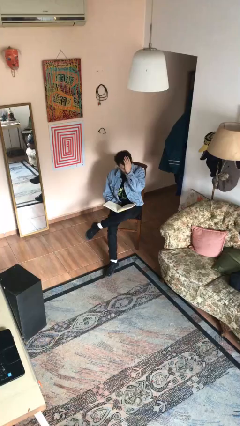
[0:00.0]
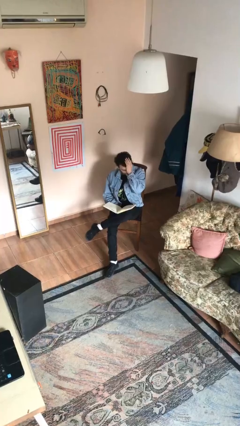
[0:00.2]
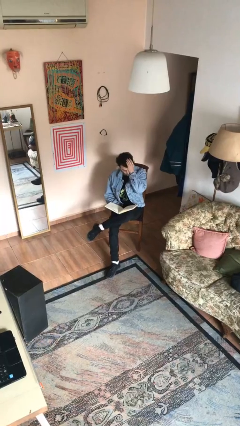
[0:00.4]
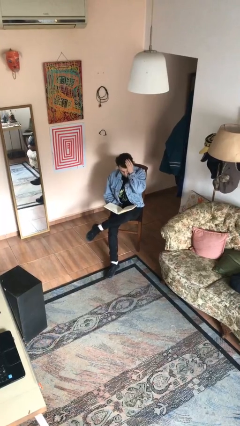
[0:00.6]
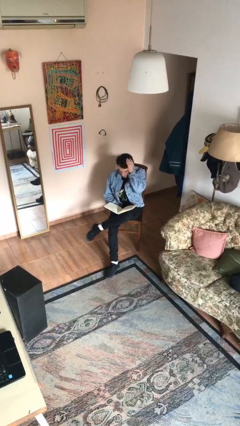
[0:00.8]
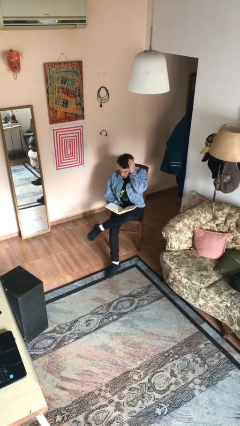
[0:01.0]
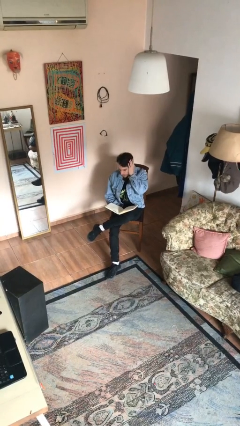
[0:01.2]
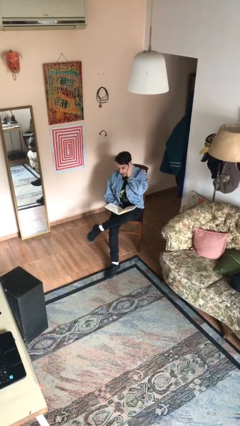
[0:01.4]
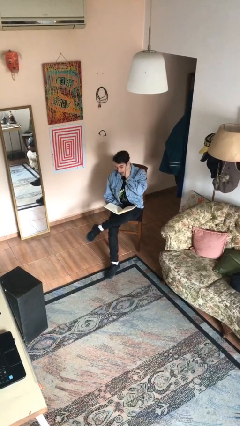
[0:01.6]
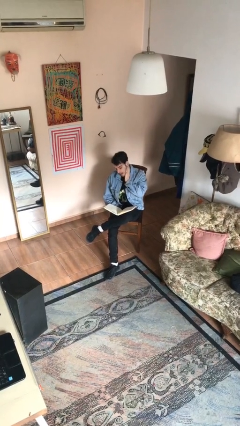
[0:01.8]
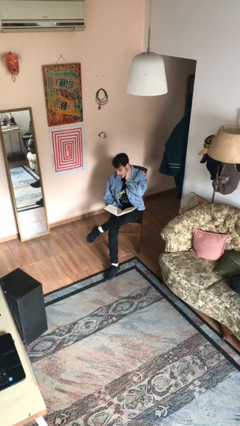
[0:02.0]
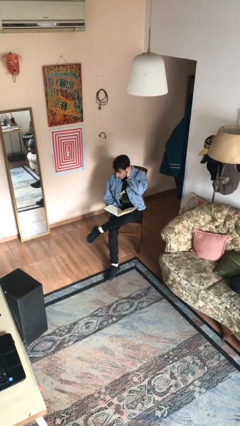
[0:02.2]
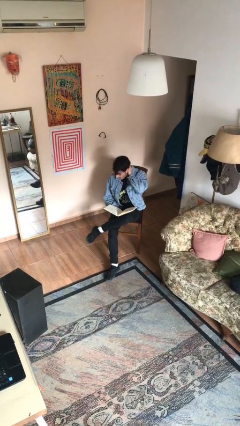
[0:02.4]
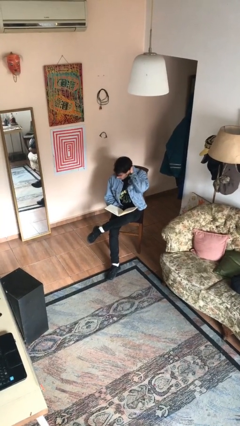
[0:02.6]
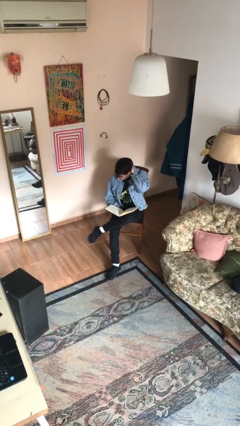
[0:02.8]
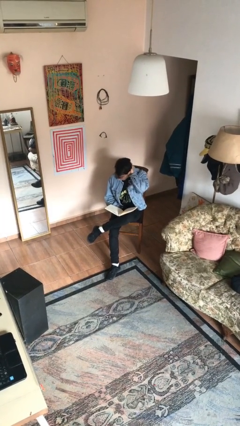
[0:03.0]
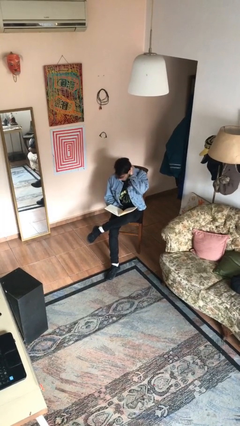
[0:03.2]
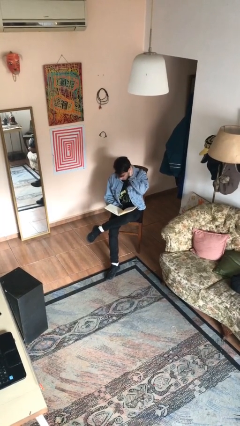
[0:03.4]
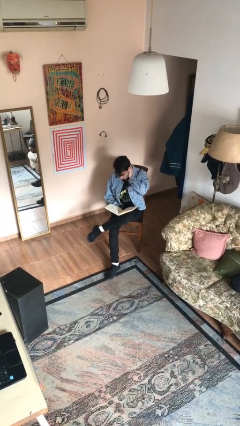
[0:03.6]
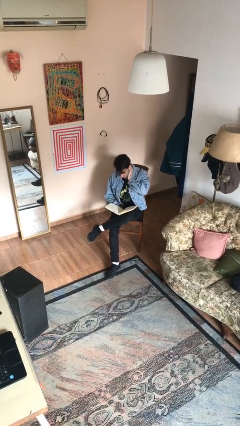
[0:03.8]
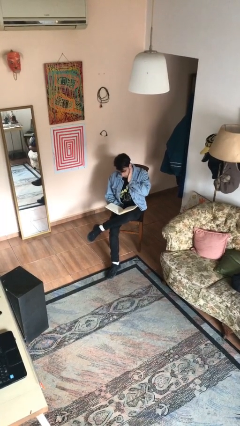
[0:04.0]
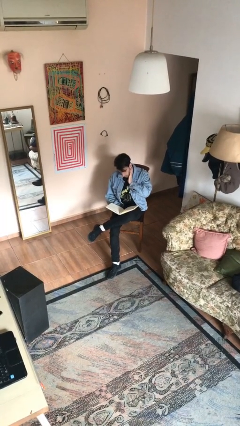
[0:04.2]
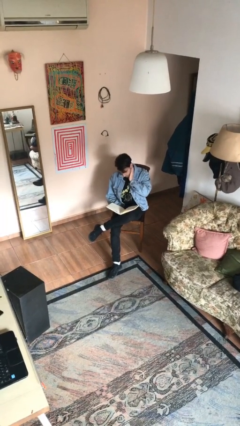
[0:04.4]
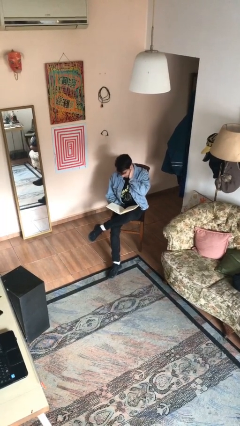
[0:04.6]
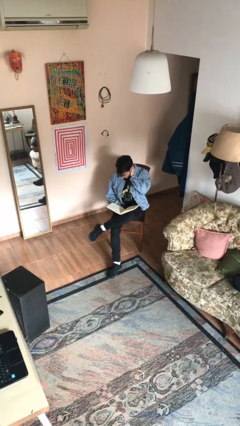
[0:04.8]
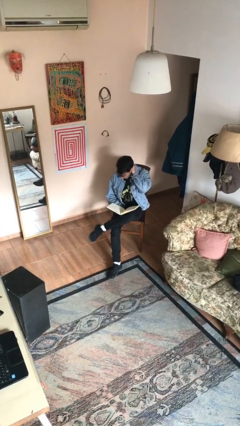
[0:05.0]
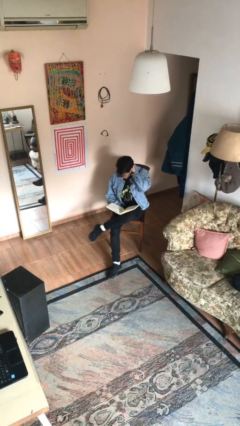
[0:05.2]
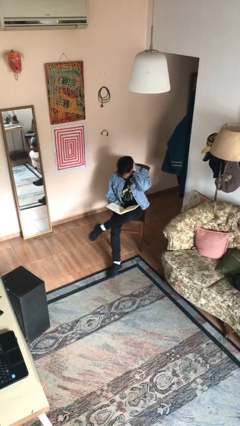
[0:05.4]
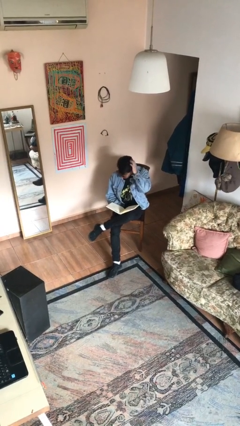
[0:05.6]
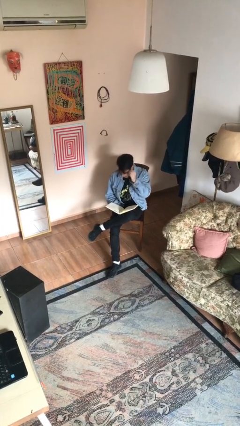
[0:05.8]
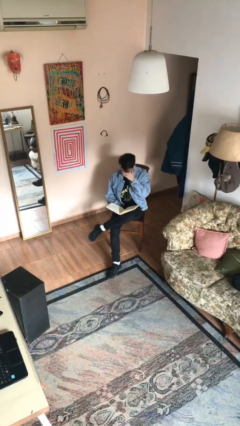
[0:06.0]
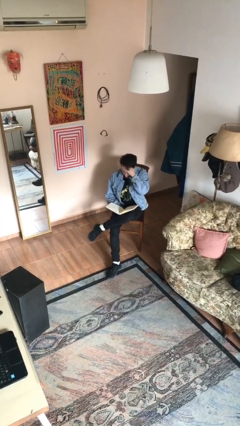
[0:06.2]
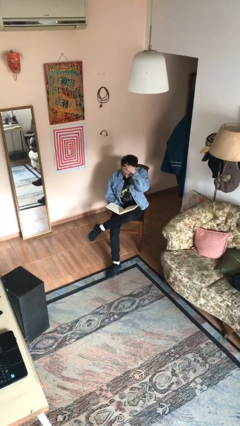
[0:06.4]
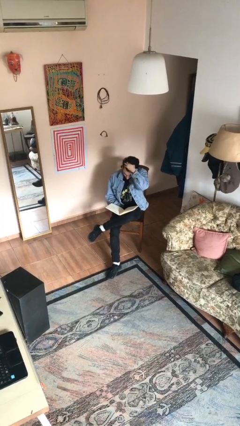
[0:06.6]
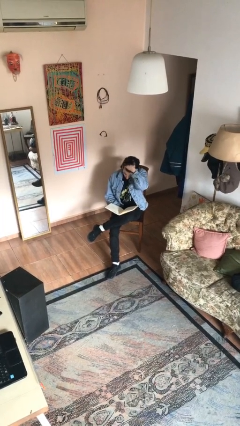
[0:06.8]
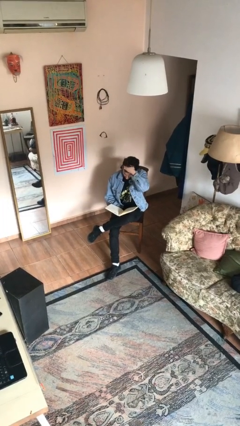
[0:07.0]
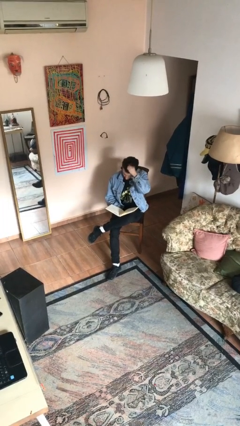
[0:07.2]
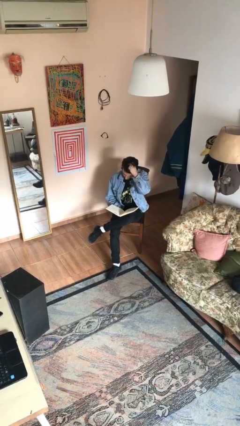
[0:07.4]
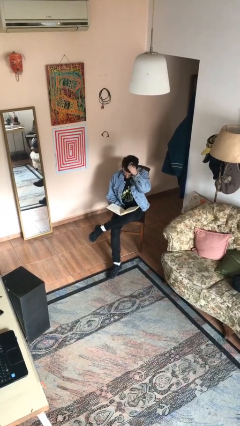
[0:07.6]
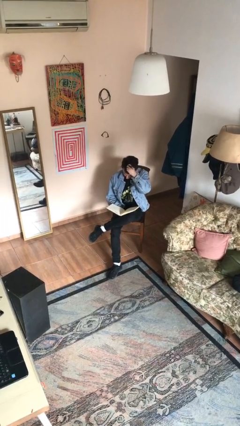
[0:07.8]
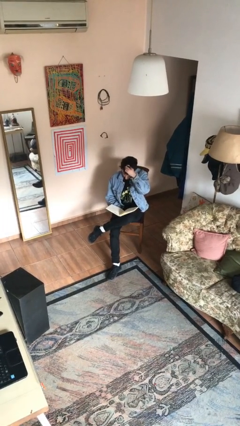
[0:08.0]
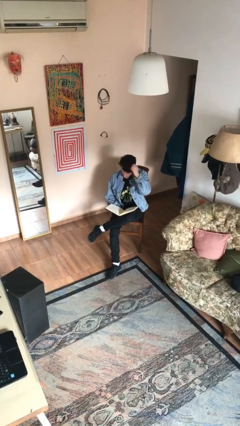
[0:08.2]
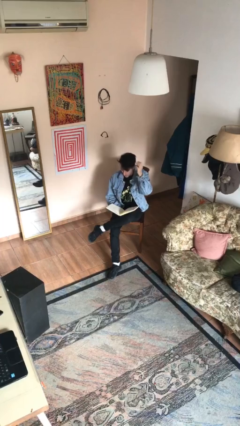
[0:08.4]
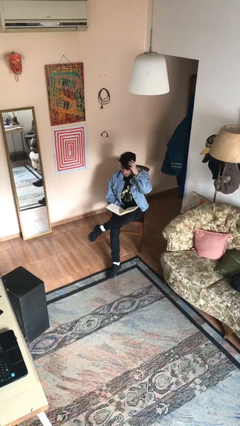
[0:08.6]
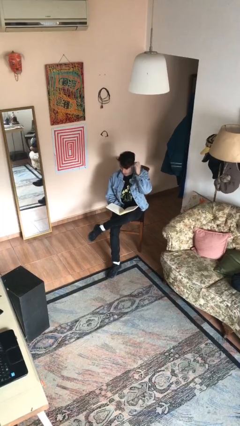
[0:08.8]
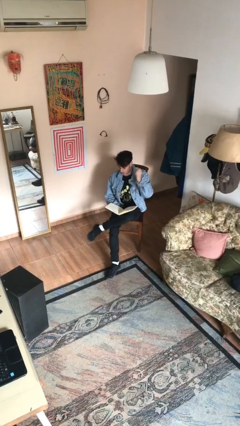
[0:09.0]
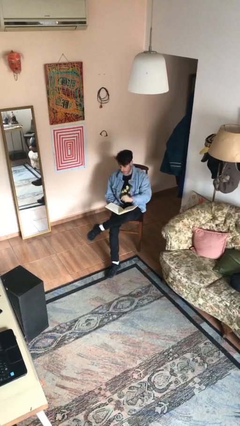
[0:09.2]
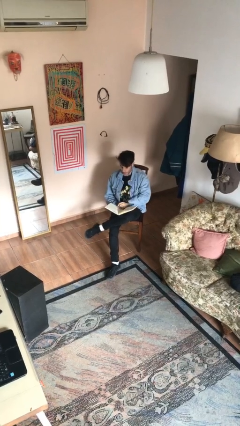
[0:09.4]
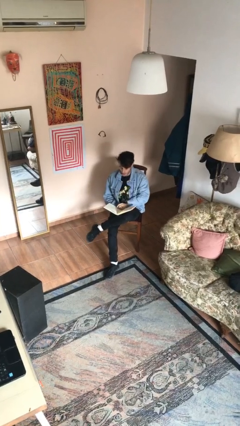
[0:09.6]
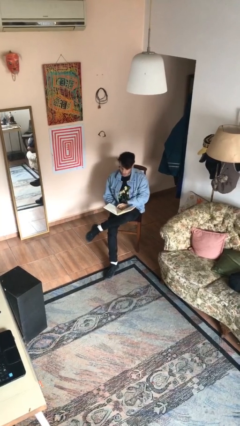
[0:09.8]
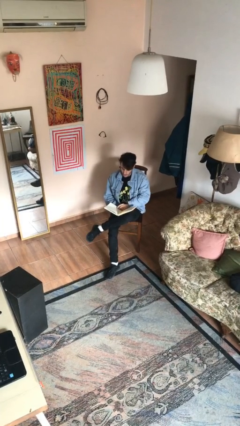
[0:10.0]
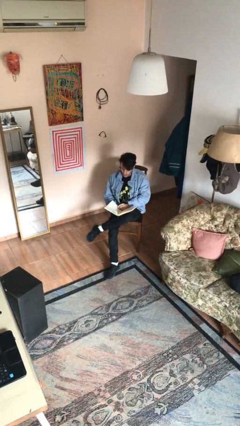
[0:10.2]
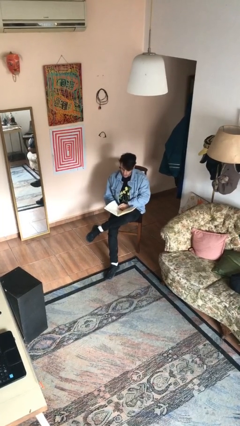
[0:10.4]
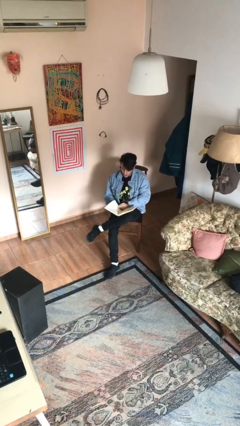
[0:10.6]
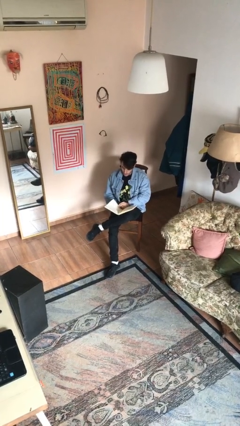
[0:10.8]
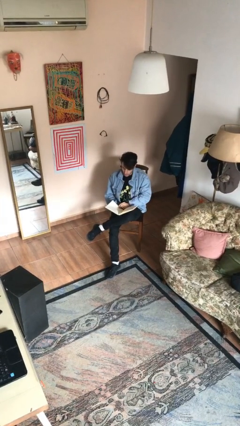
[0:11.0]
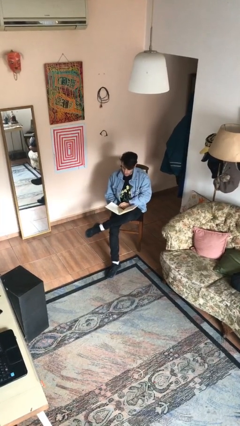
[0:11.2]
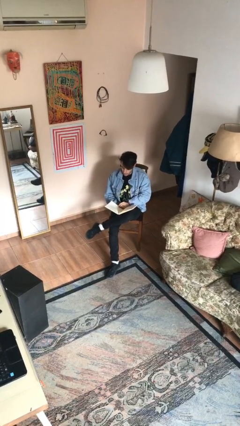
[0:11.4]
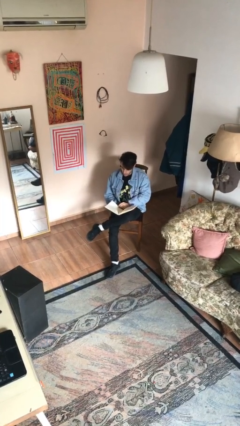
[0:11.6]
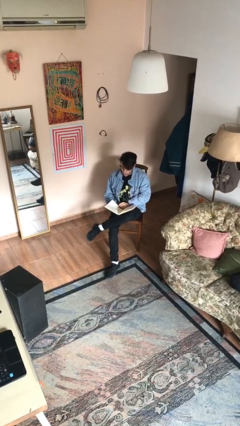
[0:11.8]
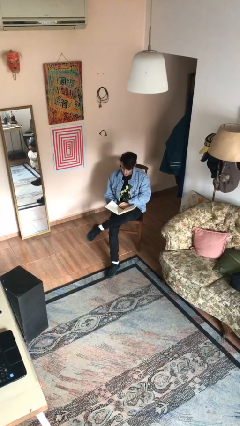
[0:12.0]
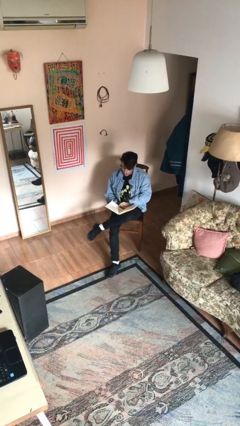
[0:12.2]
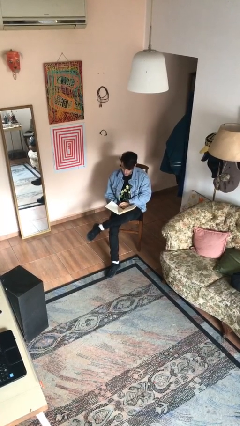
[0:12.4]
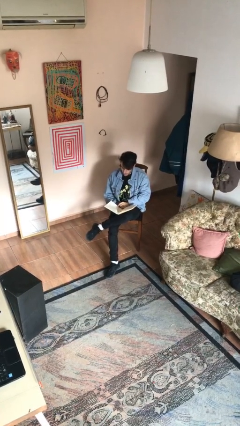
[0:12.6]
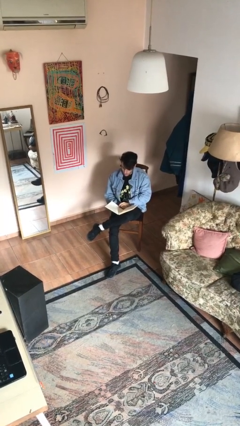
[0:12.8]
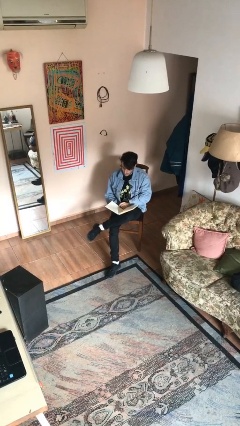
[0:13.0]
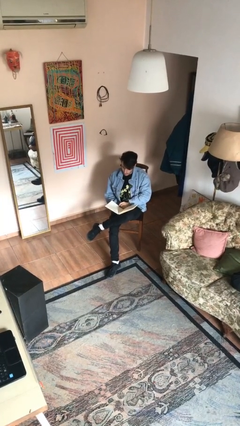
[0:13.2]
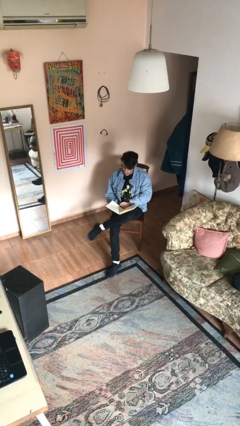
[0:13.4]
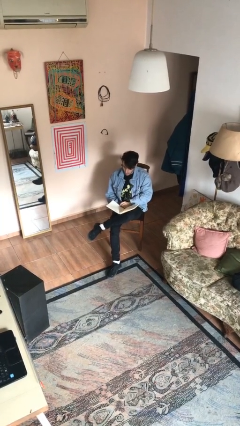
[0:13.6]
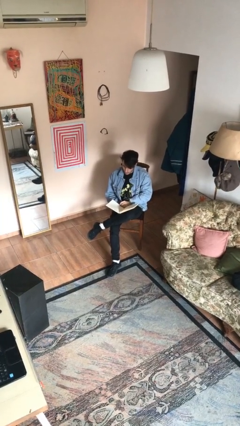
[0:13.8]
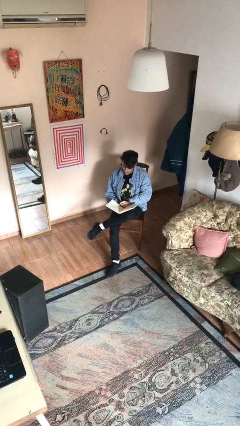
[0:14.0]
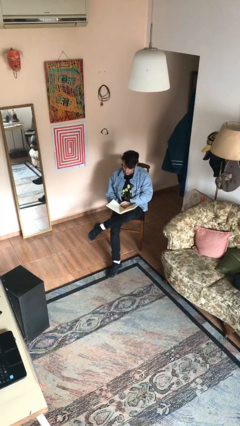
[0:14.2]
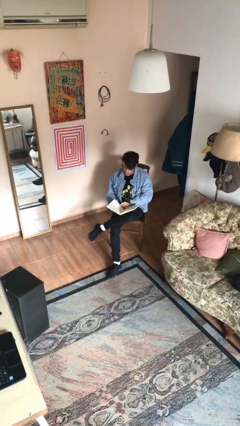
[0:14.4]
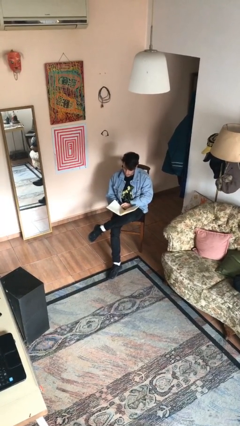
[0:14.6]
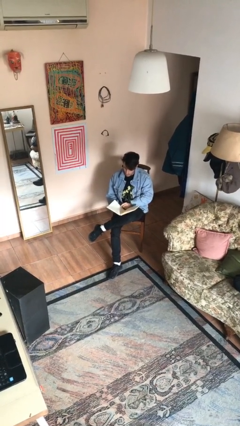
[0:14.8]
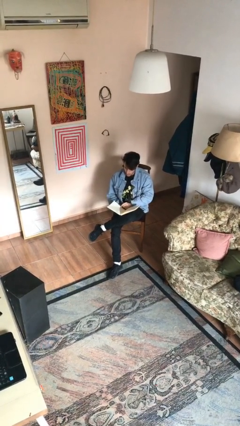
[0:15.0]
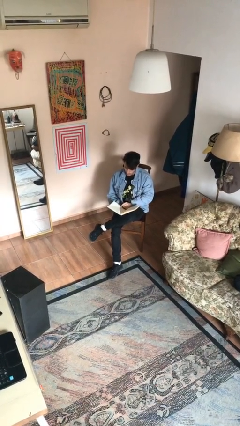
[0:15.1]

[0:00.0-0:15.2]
person reads document

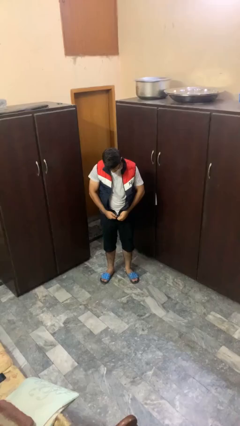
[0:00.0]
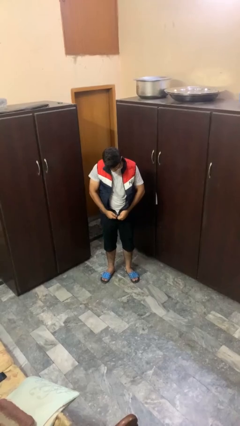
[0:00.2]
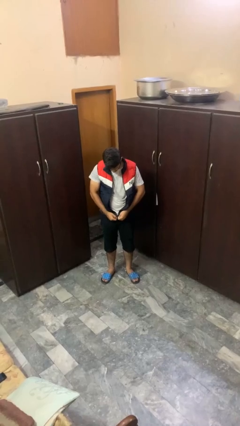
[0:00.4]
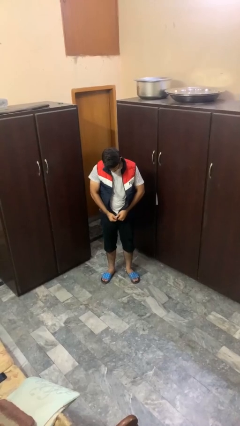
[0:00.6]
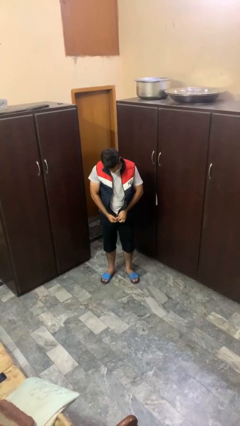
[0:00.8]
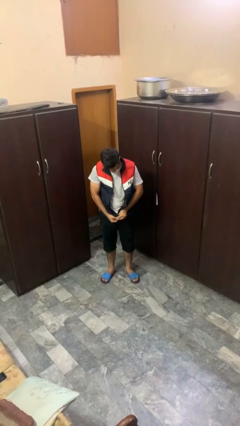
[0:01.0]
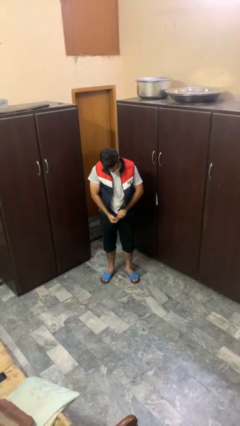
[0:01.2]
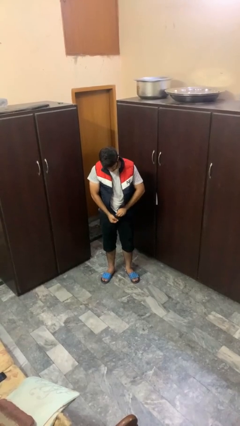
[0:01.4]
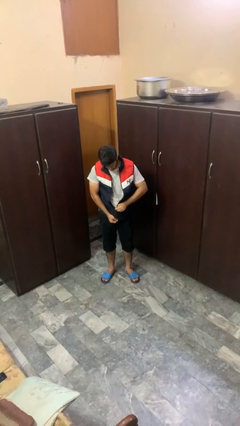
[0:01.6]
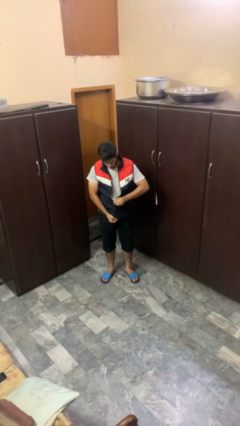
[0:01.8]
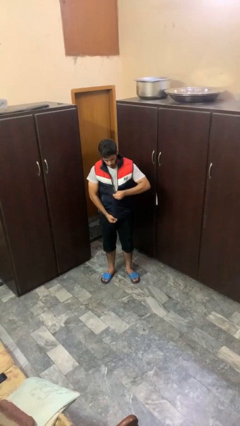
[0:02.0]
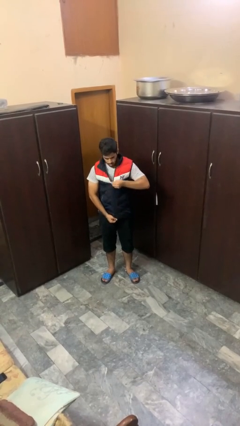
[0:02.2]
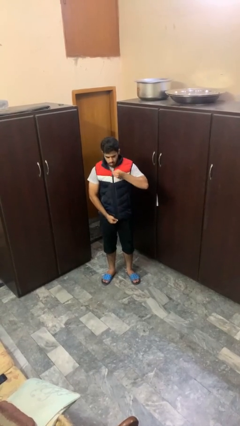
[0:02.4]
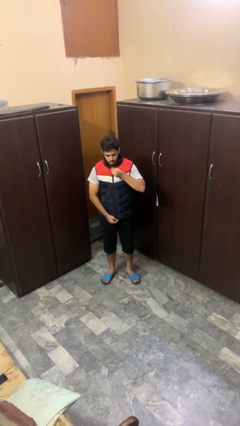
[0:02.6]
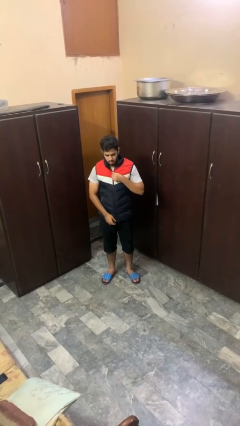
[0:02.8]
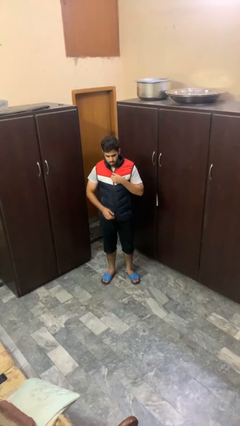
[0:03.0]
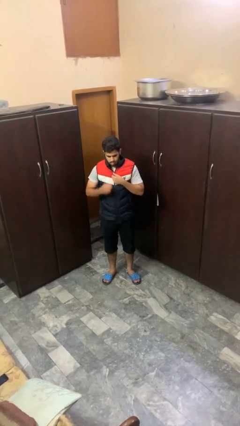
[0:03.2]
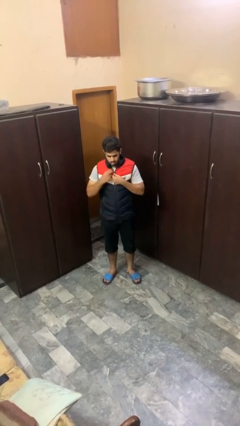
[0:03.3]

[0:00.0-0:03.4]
person zips up jacket
